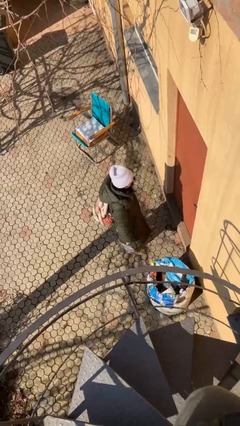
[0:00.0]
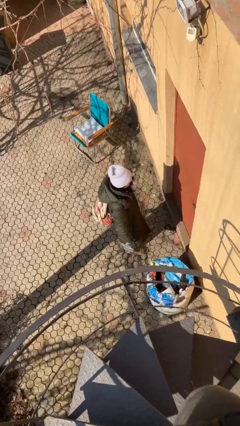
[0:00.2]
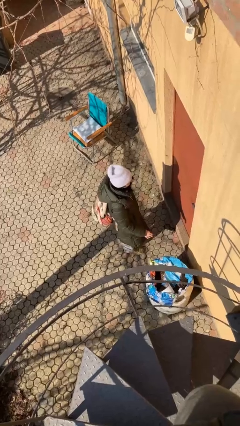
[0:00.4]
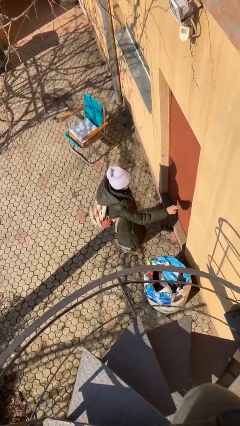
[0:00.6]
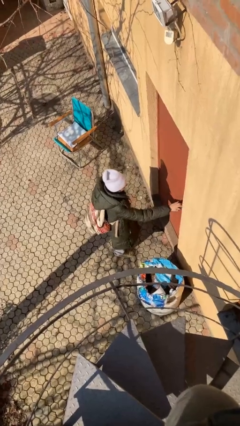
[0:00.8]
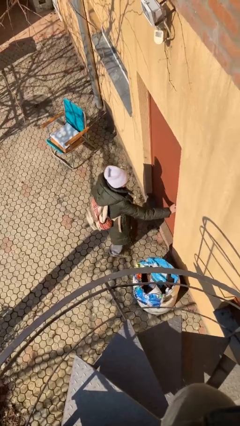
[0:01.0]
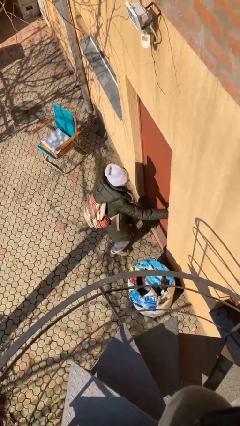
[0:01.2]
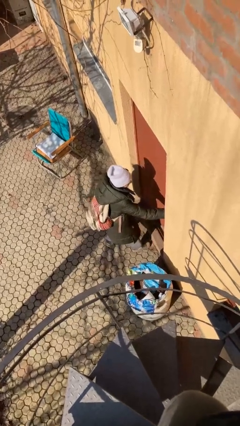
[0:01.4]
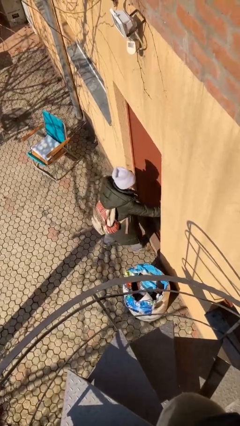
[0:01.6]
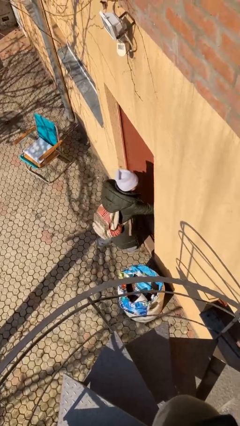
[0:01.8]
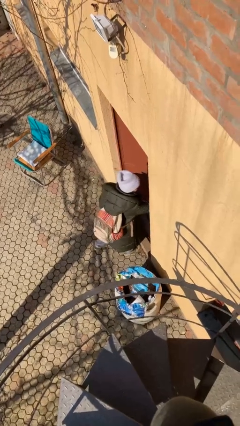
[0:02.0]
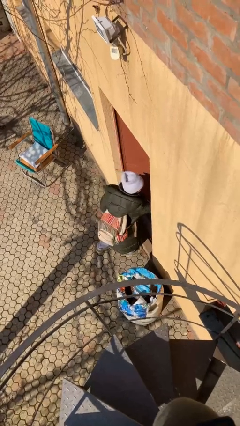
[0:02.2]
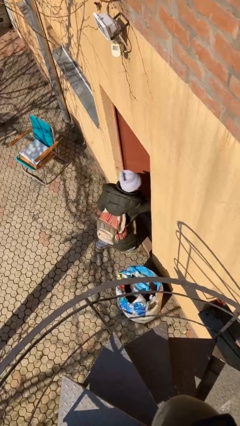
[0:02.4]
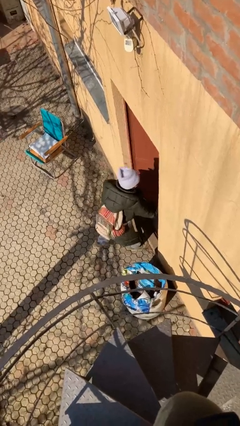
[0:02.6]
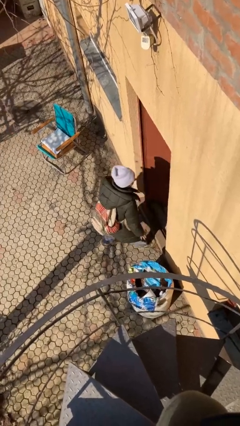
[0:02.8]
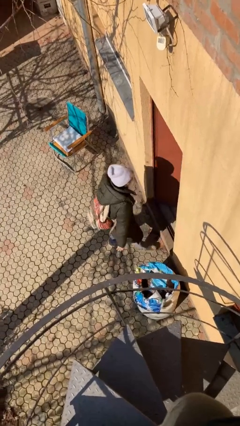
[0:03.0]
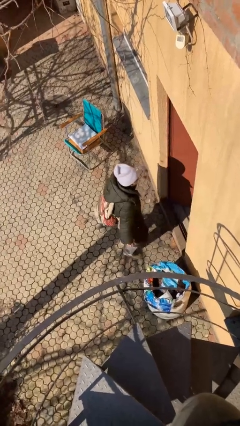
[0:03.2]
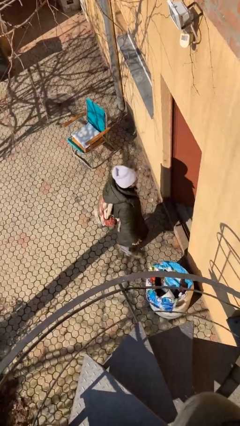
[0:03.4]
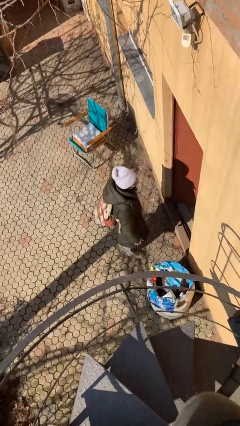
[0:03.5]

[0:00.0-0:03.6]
person opens facility door

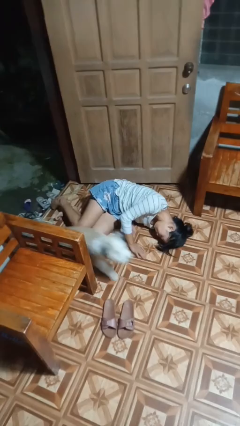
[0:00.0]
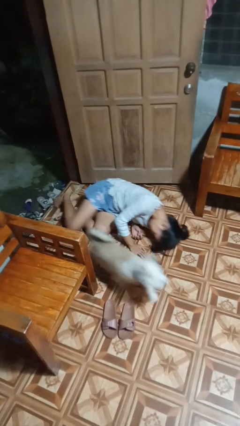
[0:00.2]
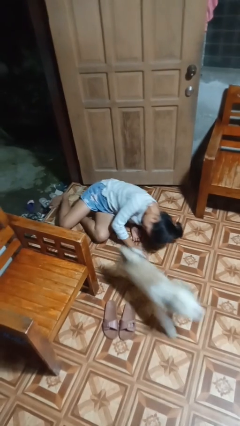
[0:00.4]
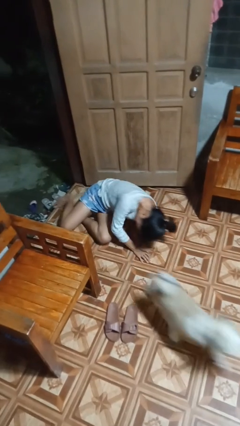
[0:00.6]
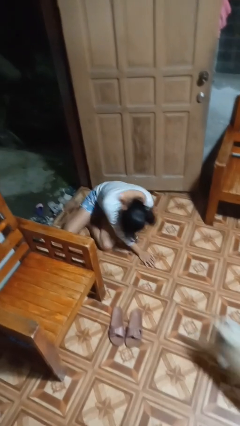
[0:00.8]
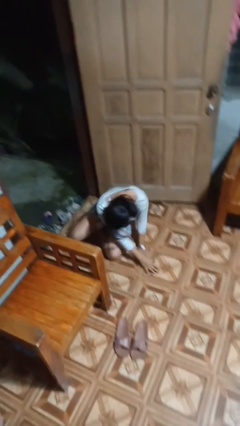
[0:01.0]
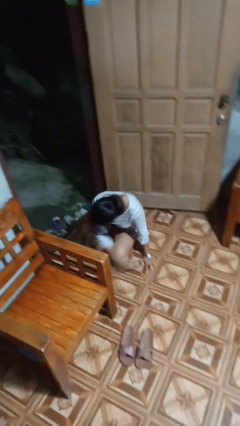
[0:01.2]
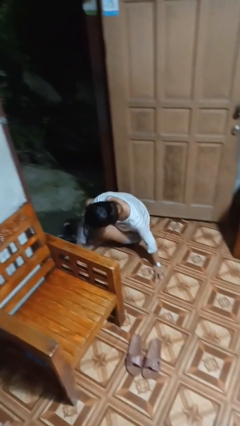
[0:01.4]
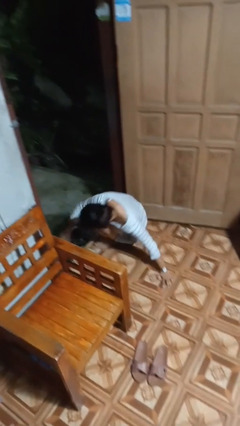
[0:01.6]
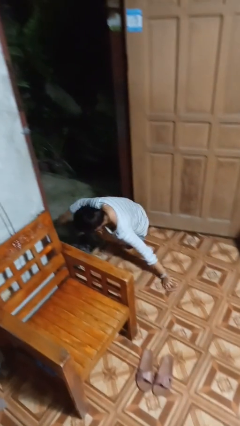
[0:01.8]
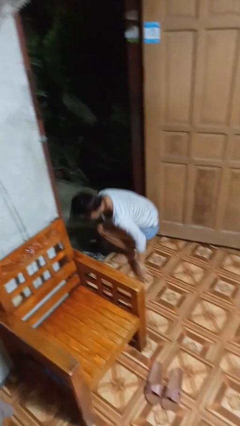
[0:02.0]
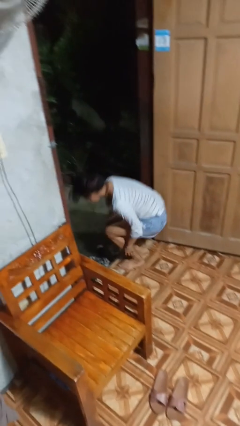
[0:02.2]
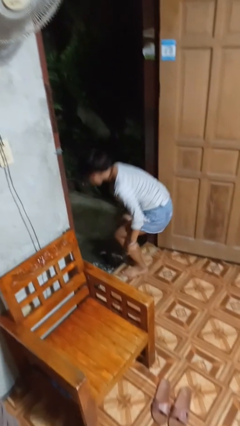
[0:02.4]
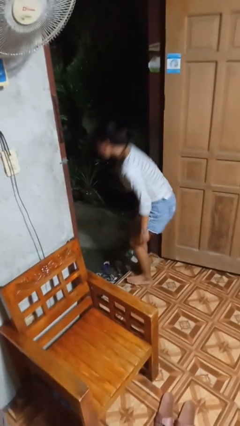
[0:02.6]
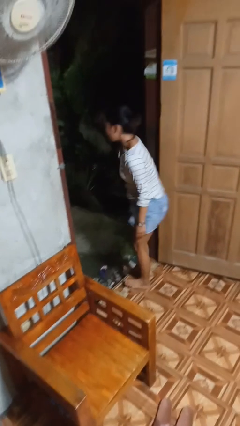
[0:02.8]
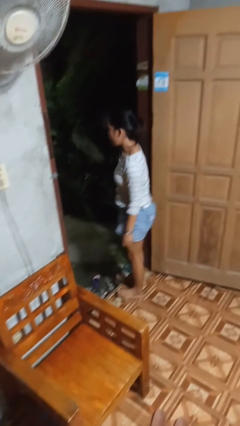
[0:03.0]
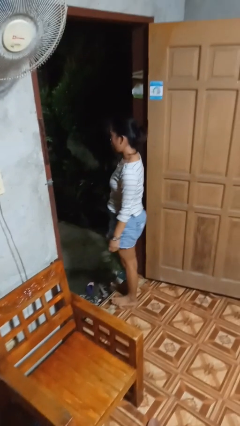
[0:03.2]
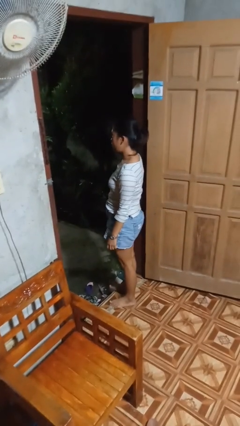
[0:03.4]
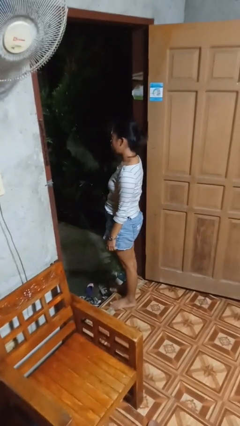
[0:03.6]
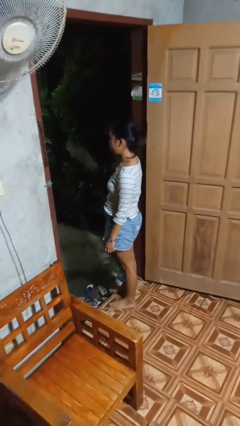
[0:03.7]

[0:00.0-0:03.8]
person stands up from floor

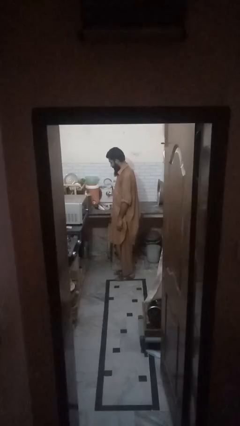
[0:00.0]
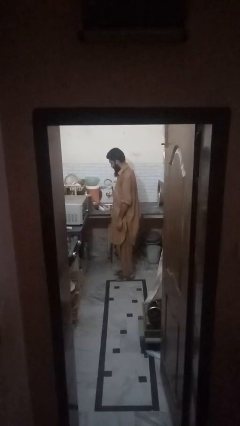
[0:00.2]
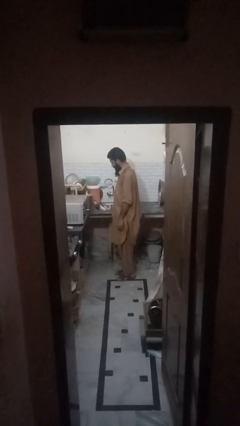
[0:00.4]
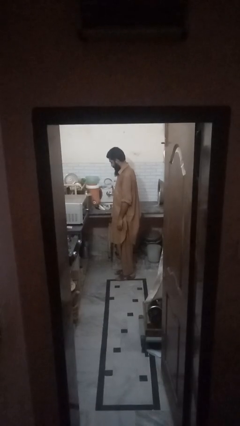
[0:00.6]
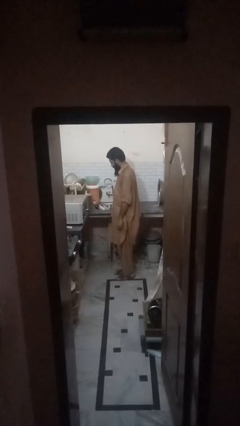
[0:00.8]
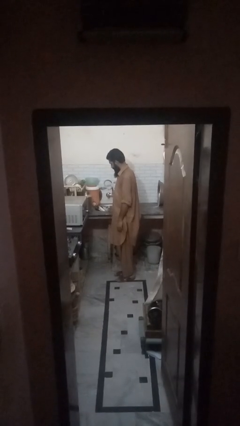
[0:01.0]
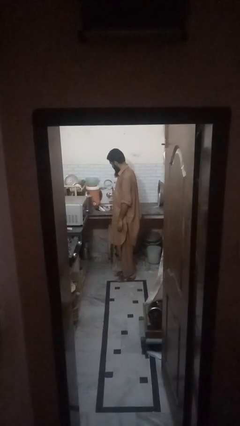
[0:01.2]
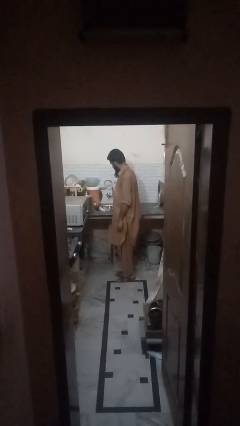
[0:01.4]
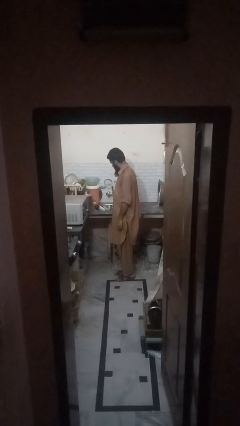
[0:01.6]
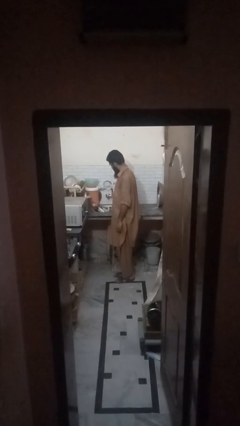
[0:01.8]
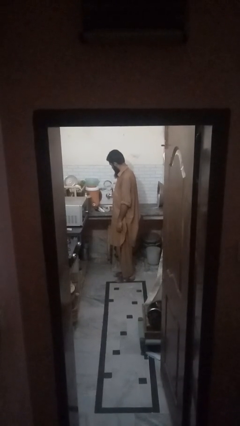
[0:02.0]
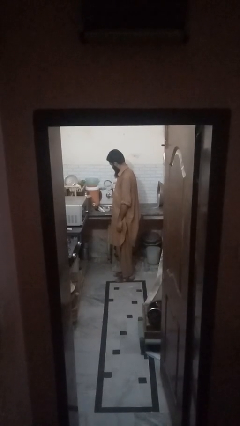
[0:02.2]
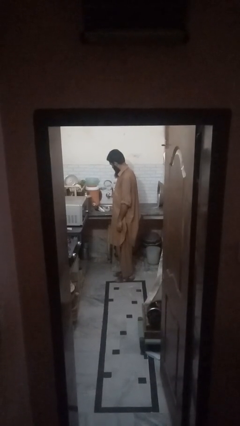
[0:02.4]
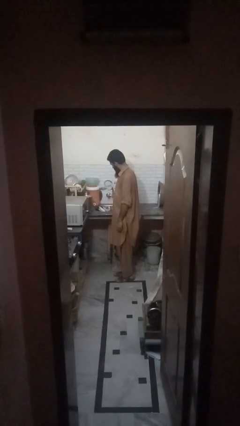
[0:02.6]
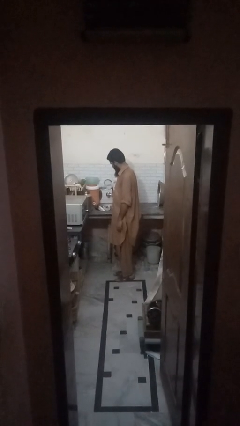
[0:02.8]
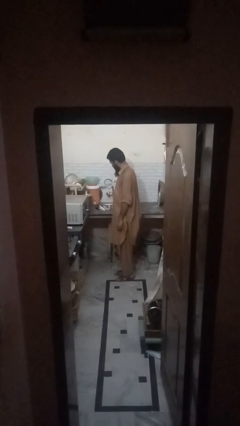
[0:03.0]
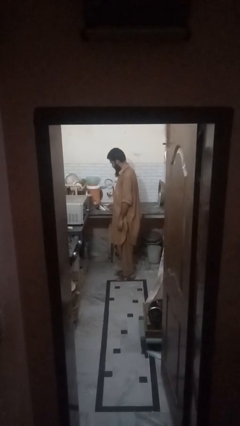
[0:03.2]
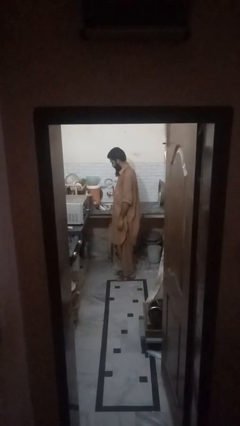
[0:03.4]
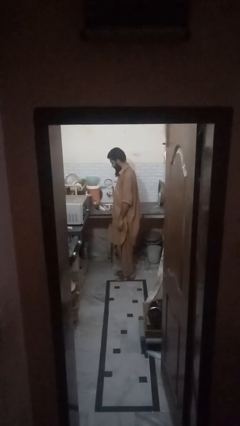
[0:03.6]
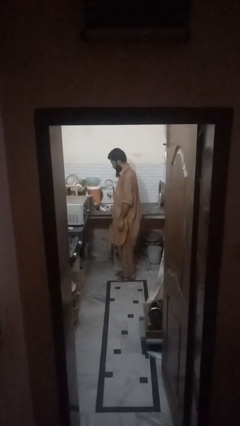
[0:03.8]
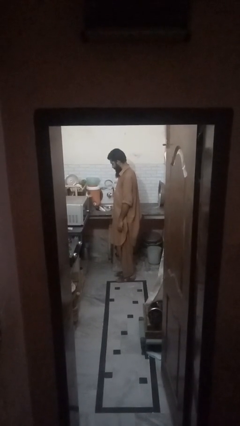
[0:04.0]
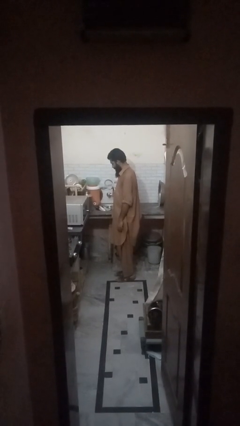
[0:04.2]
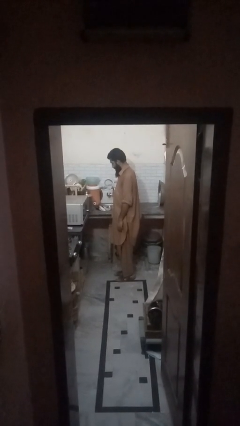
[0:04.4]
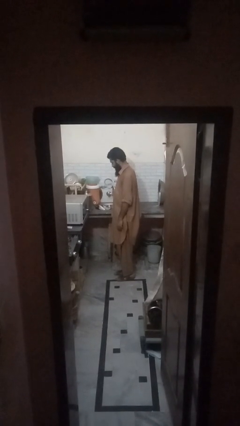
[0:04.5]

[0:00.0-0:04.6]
person opens dishwasher

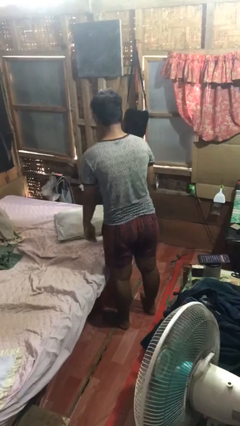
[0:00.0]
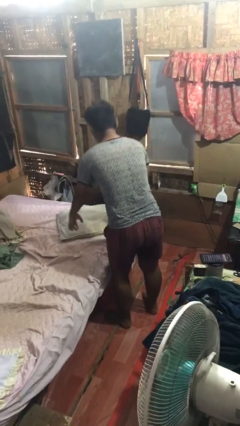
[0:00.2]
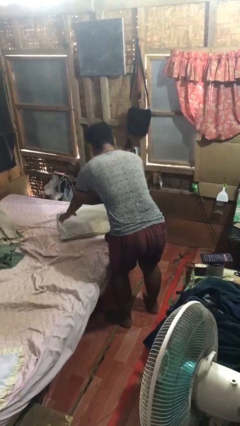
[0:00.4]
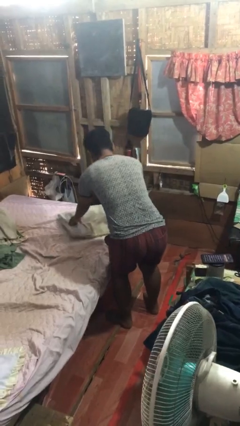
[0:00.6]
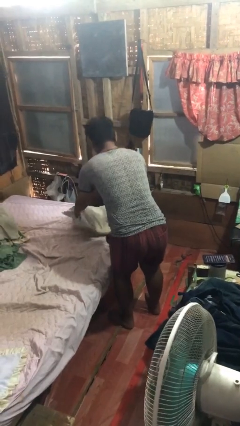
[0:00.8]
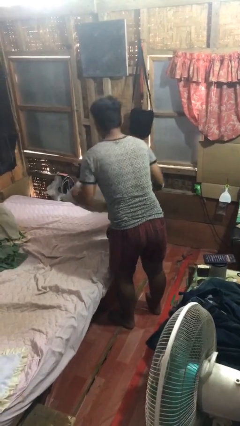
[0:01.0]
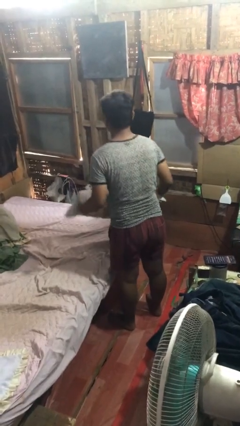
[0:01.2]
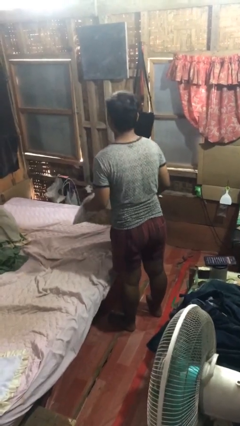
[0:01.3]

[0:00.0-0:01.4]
person picks up object from bed

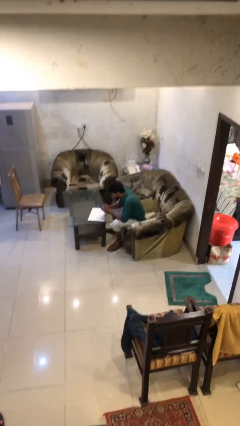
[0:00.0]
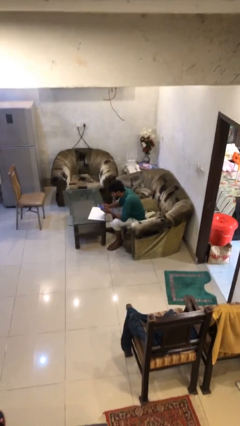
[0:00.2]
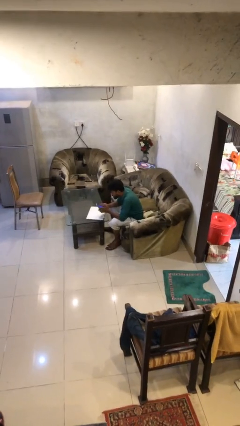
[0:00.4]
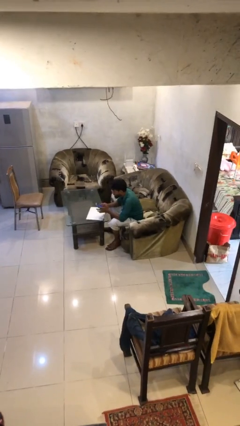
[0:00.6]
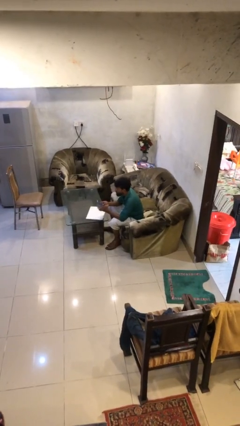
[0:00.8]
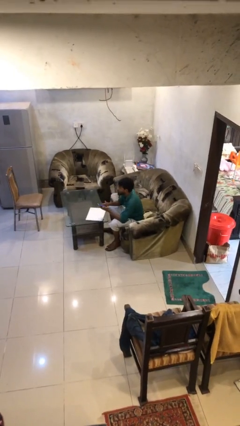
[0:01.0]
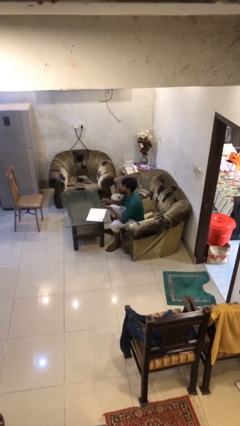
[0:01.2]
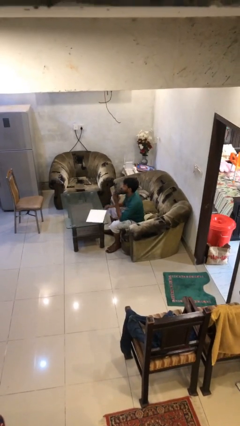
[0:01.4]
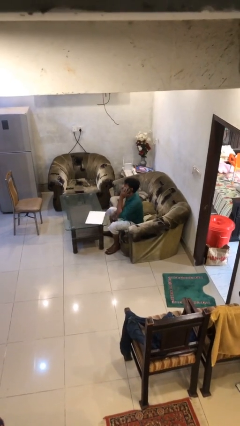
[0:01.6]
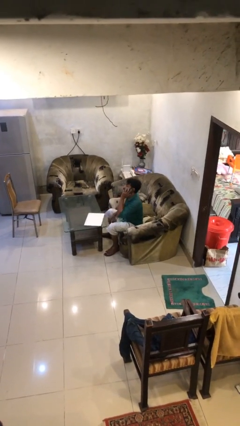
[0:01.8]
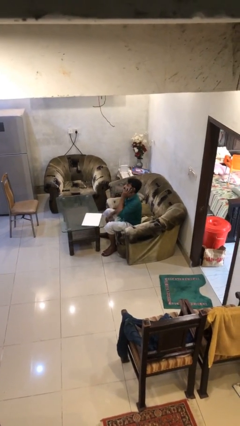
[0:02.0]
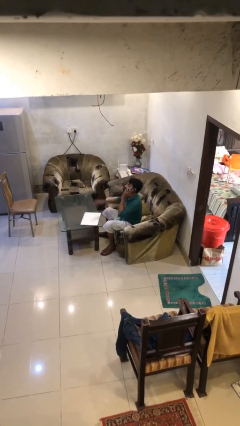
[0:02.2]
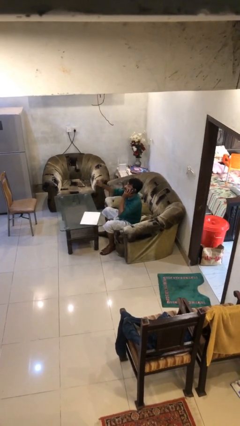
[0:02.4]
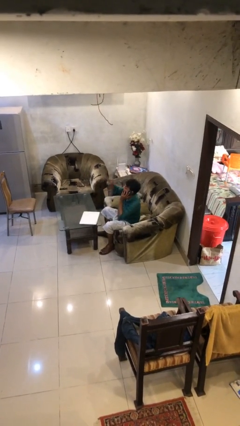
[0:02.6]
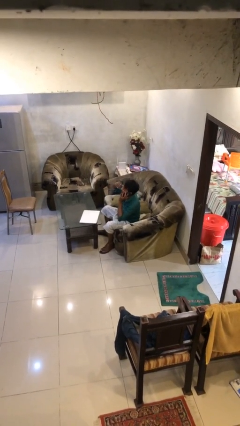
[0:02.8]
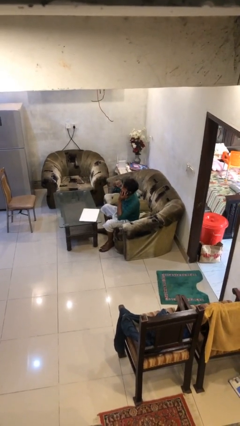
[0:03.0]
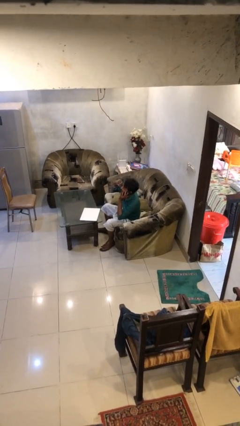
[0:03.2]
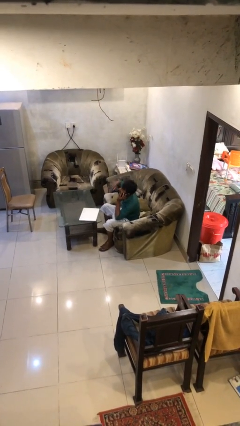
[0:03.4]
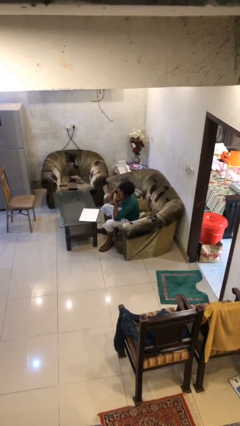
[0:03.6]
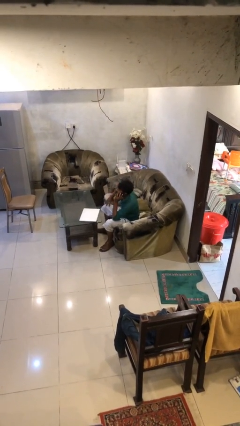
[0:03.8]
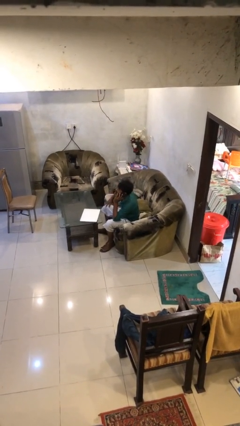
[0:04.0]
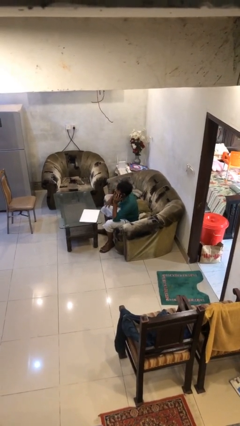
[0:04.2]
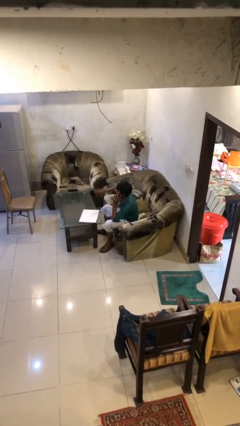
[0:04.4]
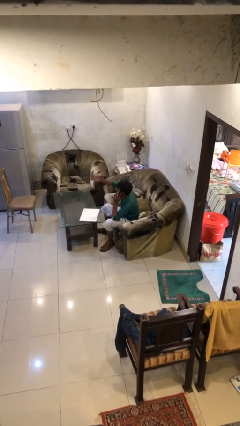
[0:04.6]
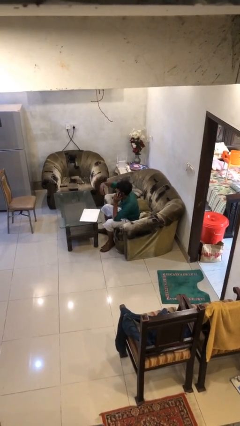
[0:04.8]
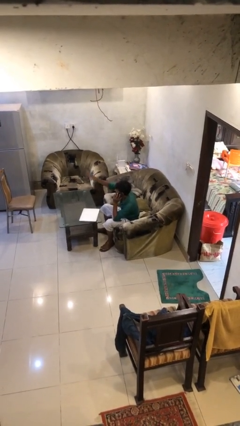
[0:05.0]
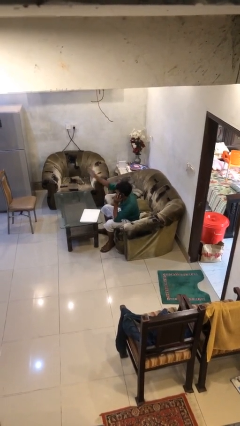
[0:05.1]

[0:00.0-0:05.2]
person talks on phone
